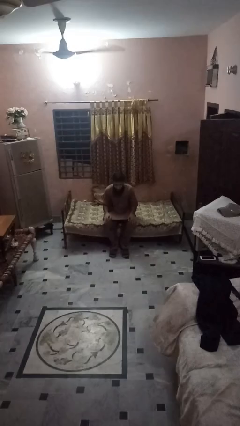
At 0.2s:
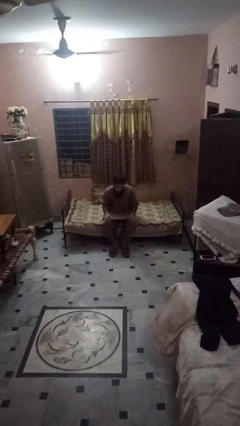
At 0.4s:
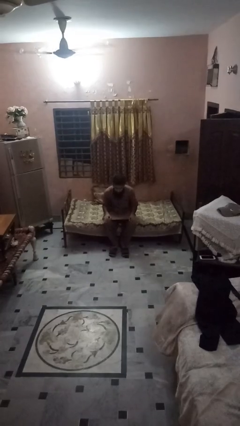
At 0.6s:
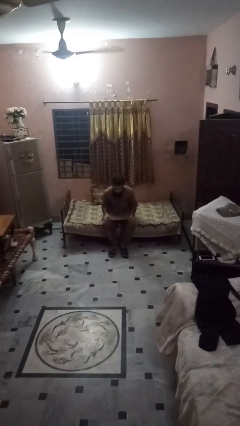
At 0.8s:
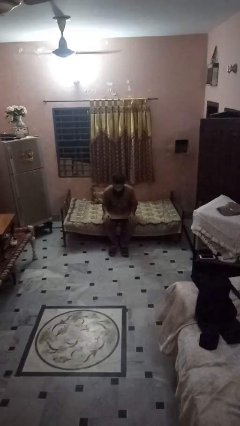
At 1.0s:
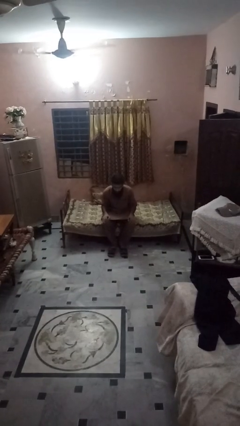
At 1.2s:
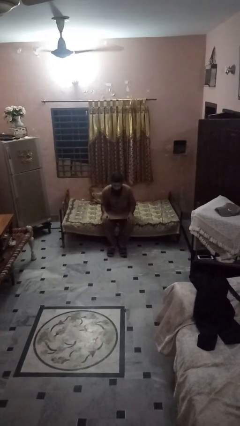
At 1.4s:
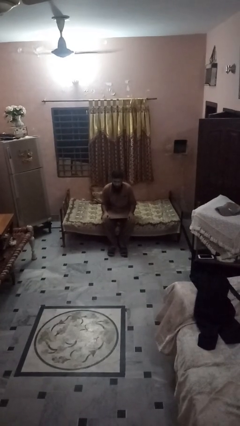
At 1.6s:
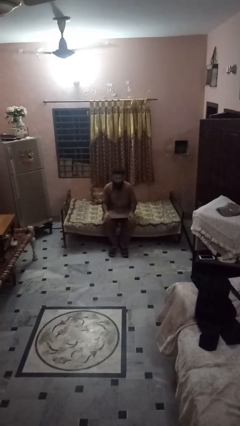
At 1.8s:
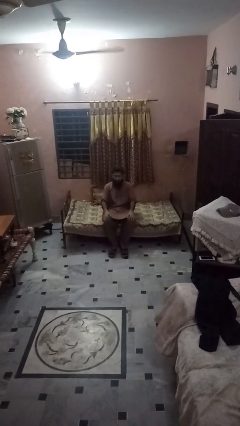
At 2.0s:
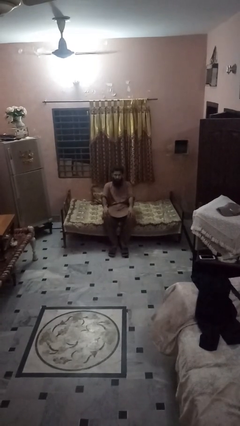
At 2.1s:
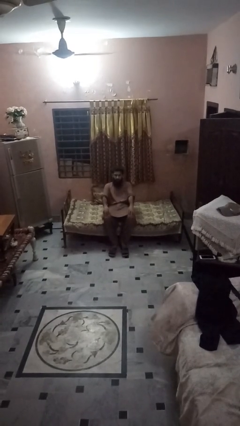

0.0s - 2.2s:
person lies down on bed

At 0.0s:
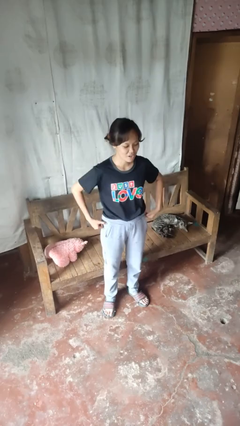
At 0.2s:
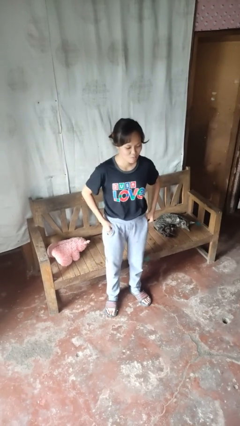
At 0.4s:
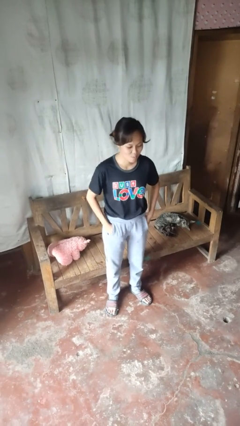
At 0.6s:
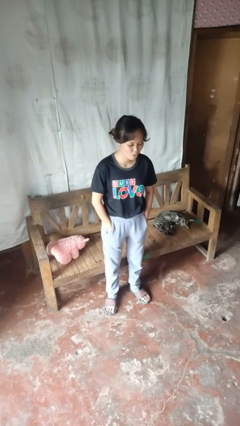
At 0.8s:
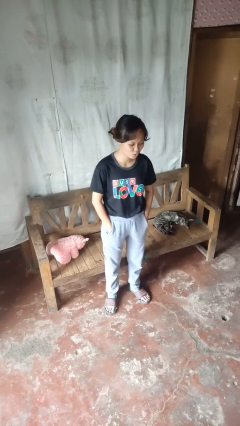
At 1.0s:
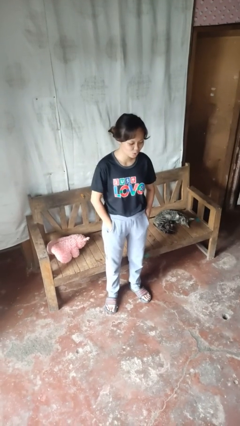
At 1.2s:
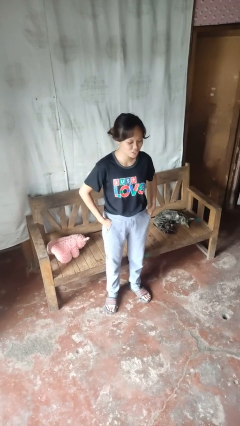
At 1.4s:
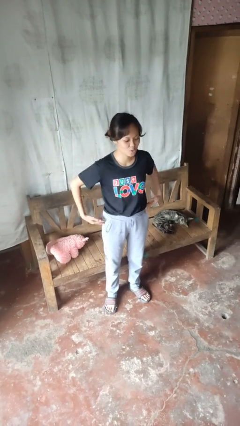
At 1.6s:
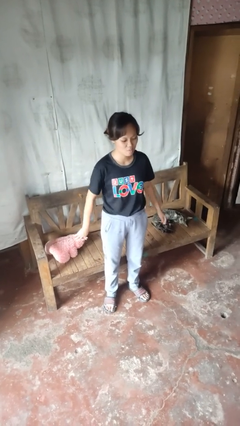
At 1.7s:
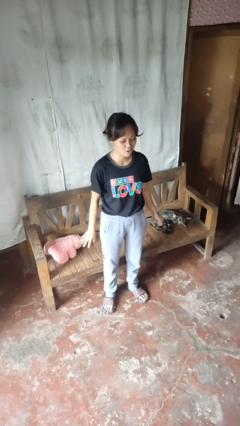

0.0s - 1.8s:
person puts hands in back pockets

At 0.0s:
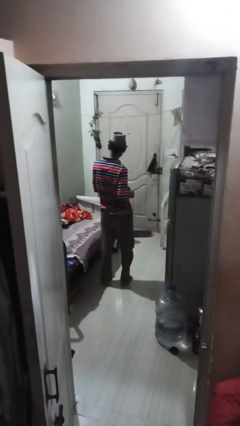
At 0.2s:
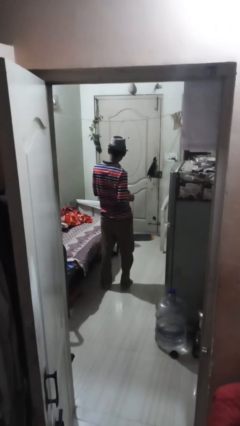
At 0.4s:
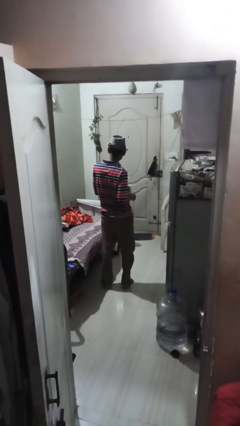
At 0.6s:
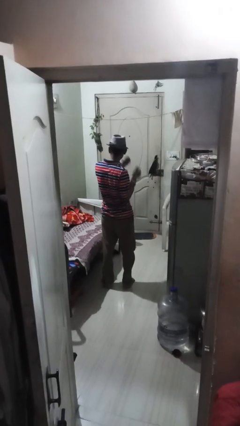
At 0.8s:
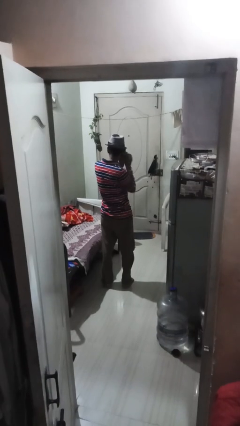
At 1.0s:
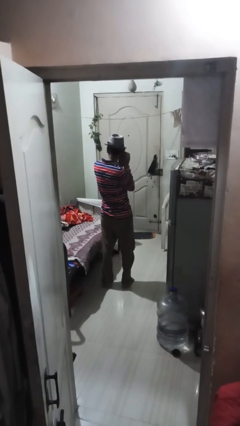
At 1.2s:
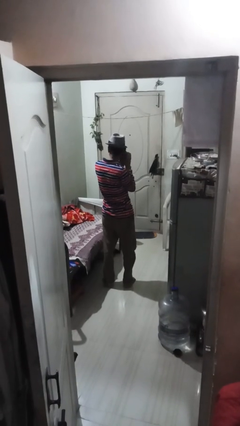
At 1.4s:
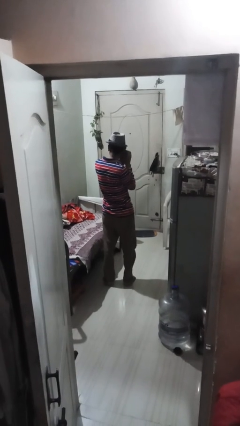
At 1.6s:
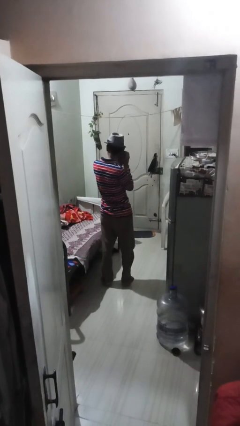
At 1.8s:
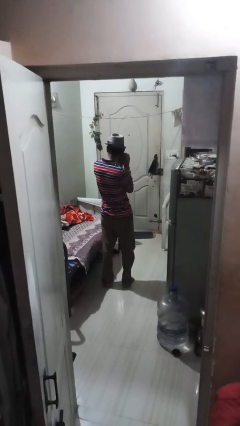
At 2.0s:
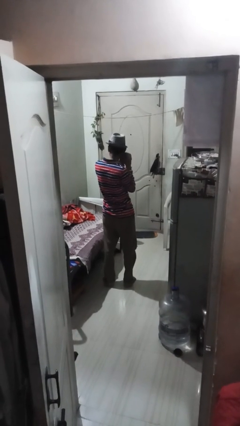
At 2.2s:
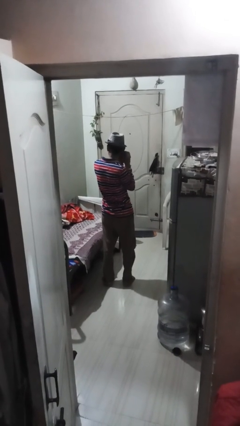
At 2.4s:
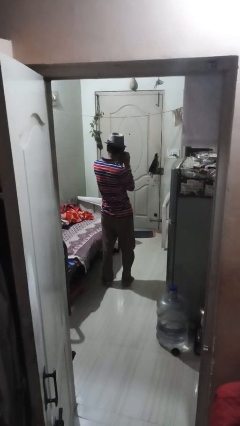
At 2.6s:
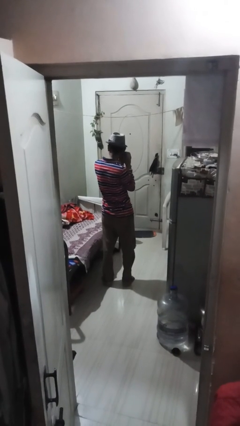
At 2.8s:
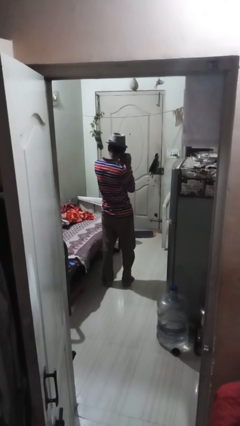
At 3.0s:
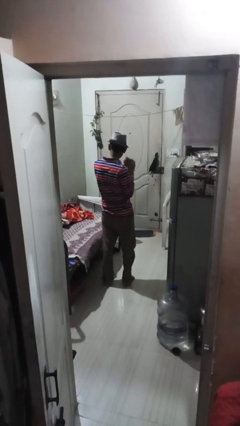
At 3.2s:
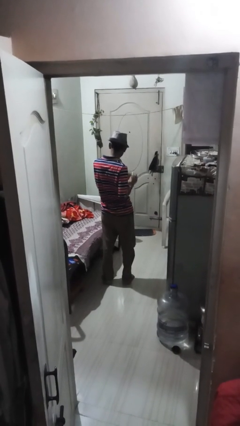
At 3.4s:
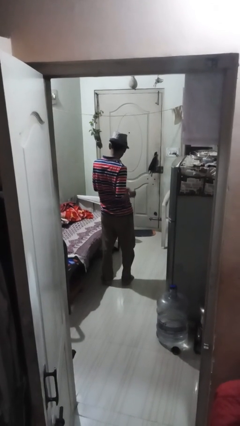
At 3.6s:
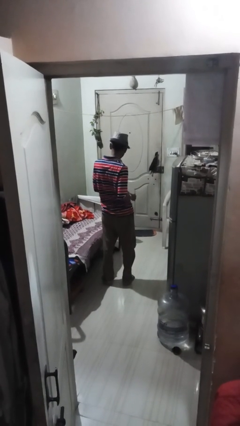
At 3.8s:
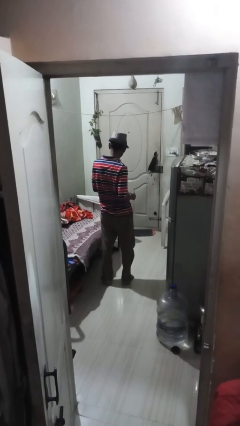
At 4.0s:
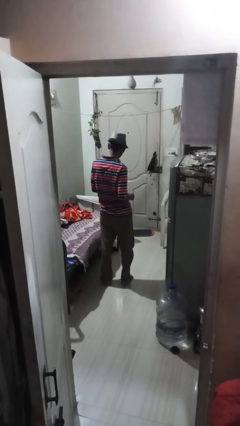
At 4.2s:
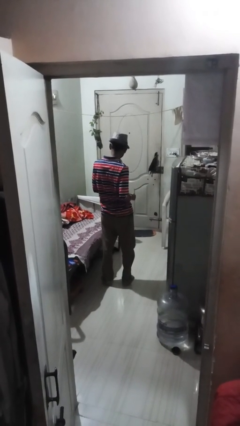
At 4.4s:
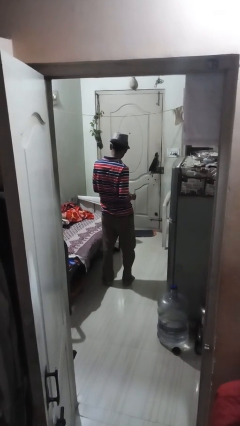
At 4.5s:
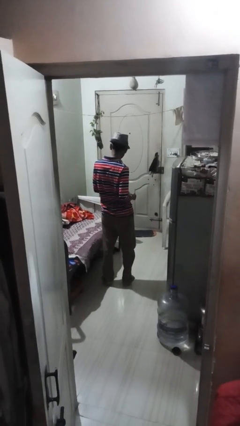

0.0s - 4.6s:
person takes off earrings

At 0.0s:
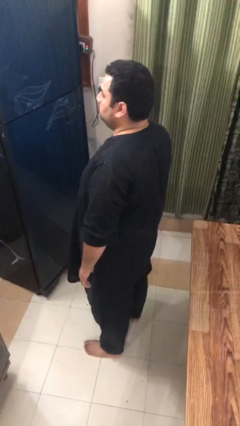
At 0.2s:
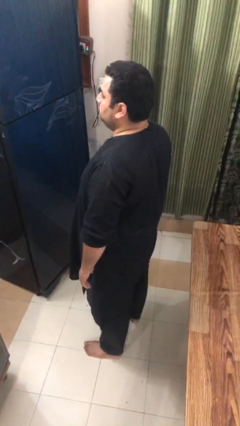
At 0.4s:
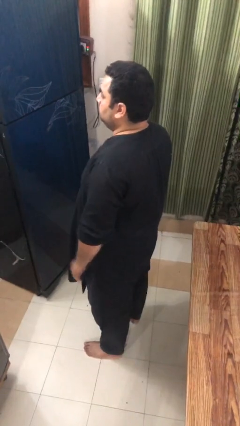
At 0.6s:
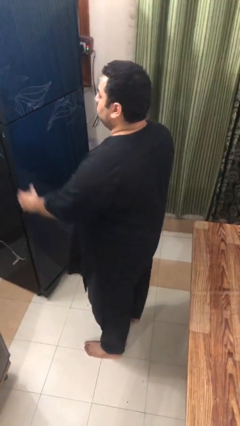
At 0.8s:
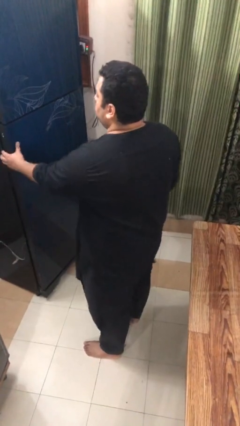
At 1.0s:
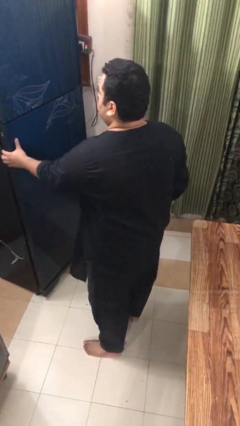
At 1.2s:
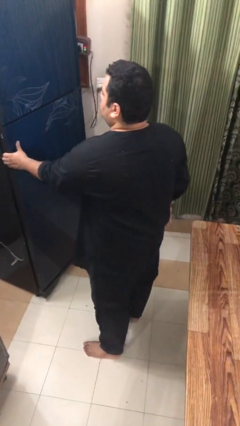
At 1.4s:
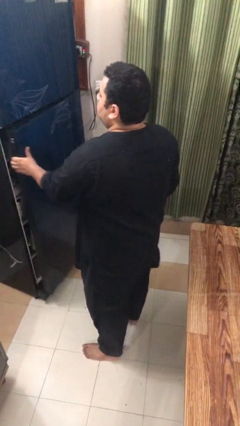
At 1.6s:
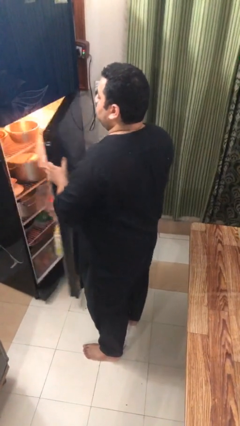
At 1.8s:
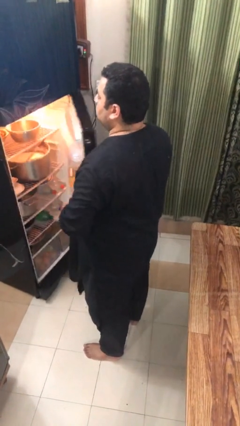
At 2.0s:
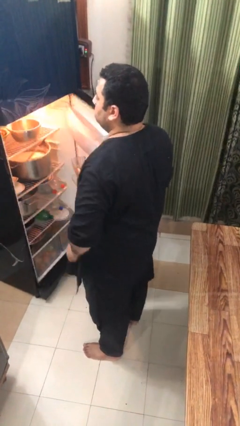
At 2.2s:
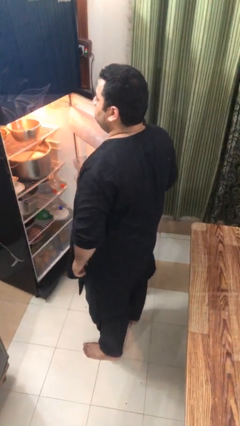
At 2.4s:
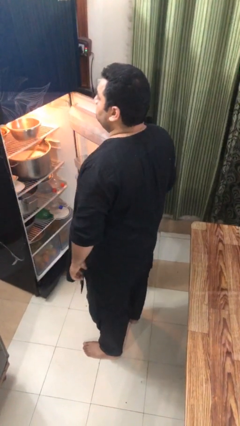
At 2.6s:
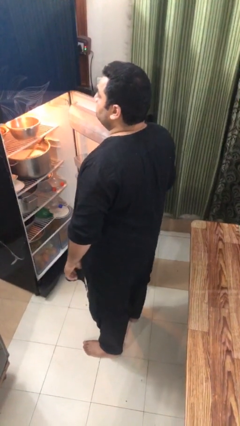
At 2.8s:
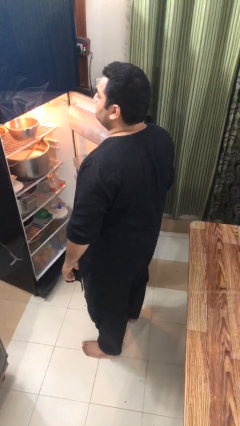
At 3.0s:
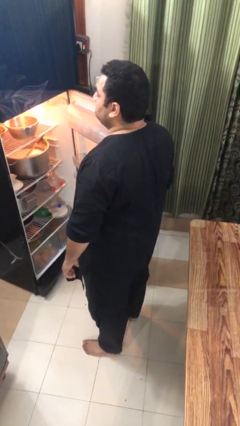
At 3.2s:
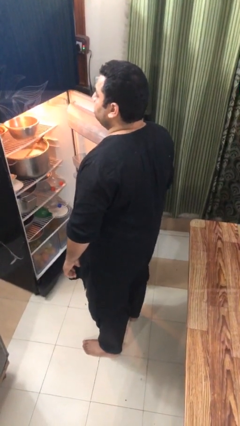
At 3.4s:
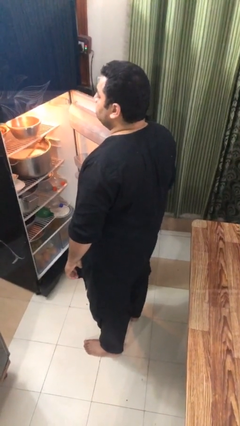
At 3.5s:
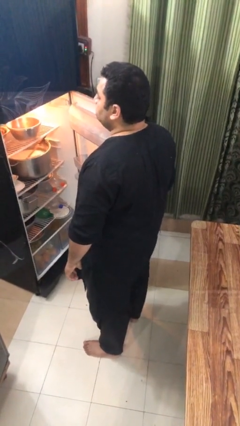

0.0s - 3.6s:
person opens refrigerator

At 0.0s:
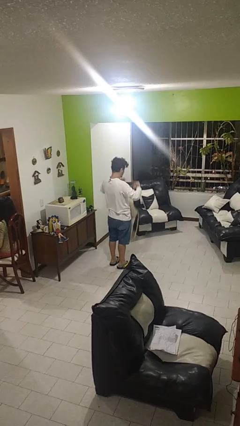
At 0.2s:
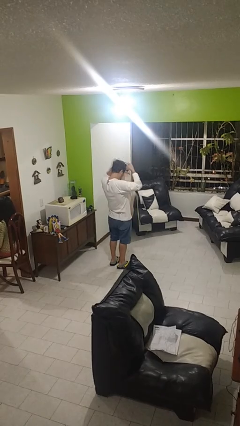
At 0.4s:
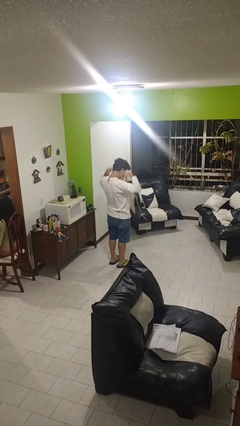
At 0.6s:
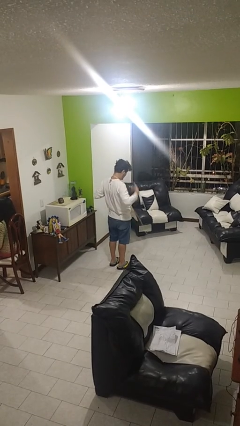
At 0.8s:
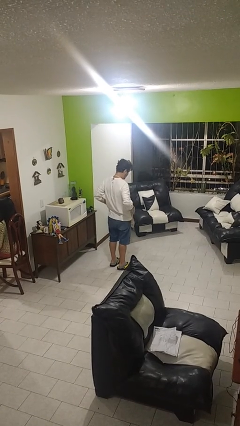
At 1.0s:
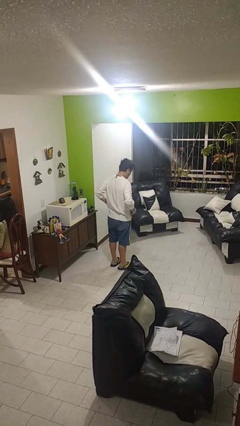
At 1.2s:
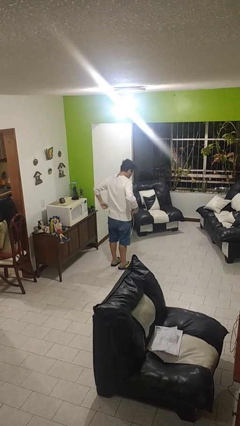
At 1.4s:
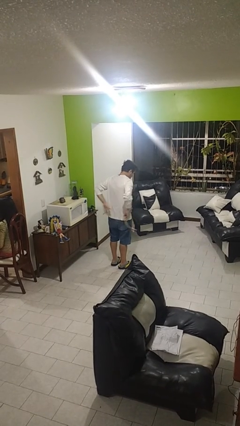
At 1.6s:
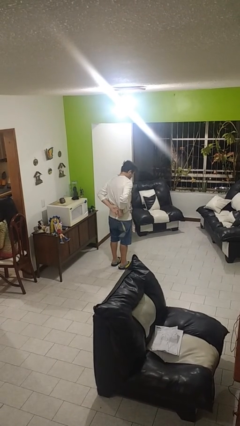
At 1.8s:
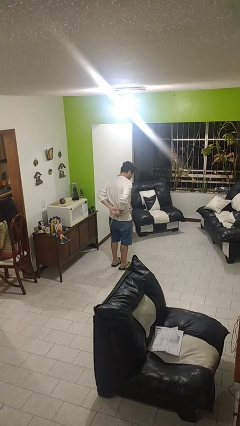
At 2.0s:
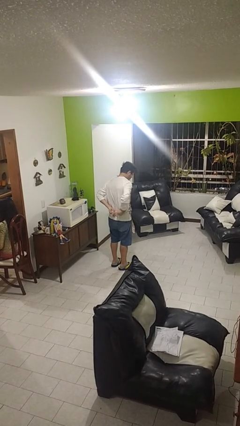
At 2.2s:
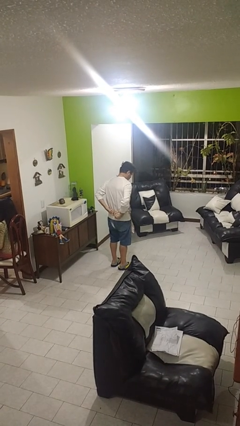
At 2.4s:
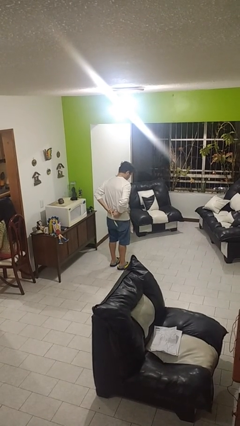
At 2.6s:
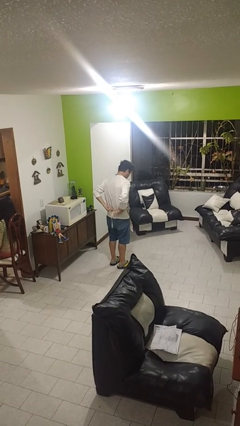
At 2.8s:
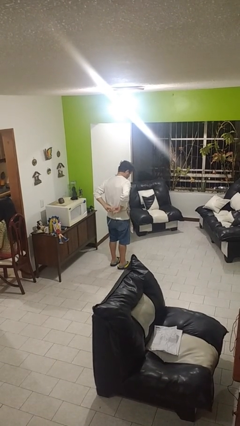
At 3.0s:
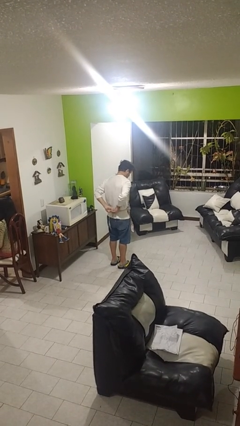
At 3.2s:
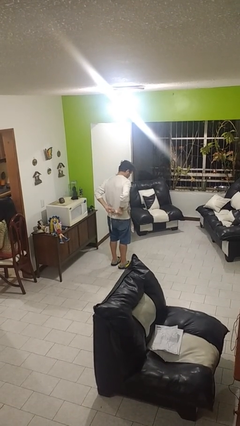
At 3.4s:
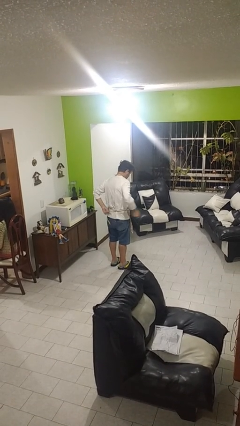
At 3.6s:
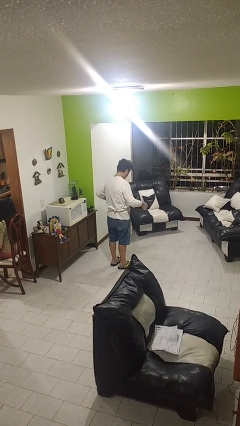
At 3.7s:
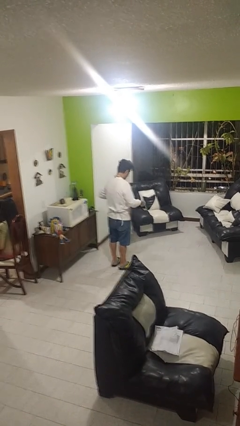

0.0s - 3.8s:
person puts on apron

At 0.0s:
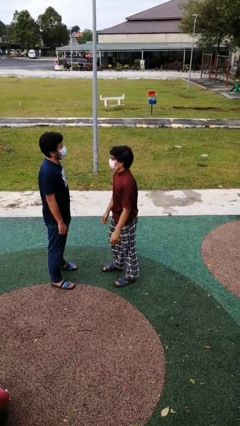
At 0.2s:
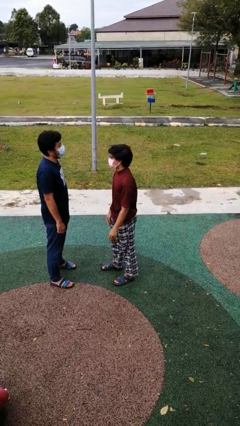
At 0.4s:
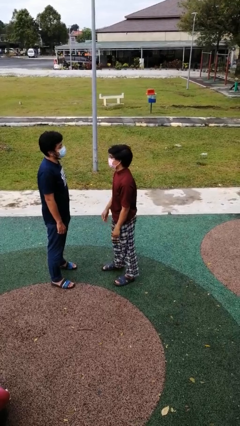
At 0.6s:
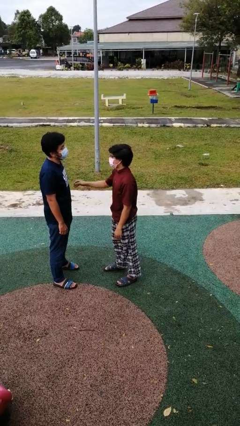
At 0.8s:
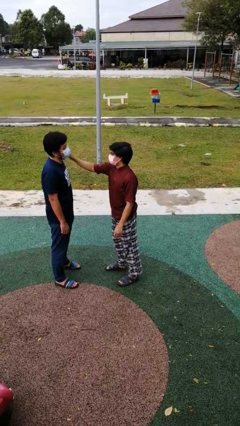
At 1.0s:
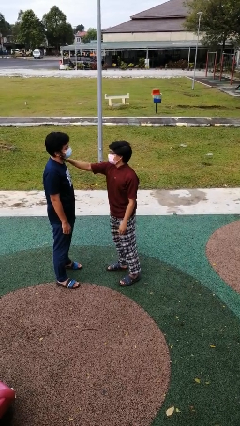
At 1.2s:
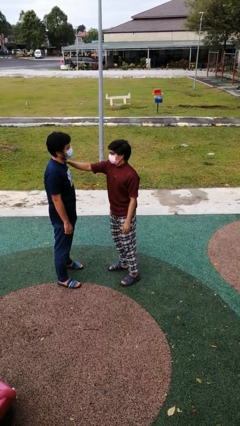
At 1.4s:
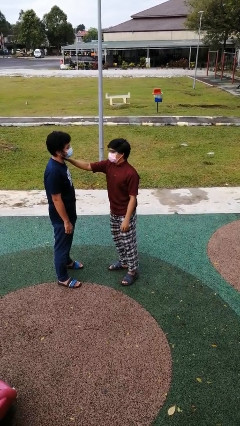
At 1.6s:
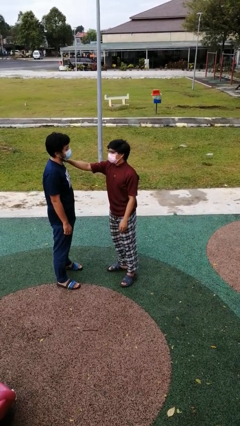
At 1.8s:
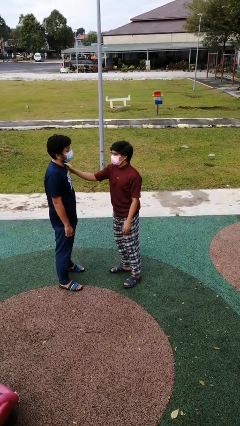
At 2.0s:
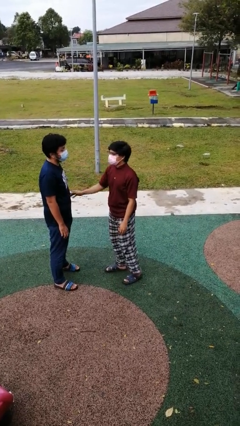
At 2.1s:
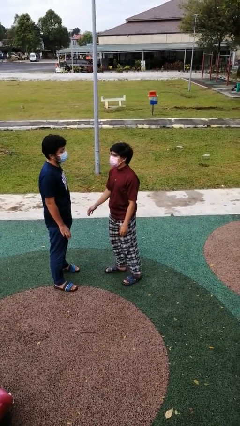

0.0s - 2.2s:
person pounds shoulders of person
